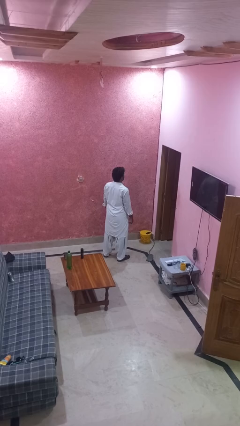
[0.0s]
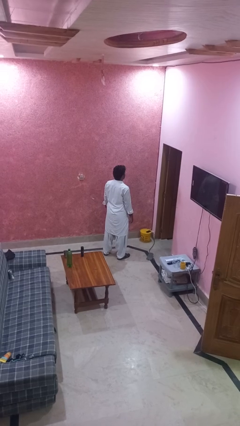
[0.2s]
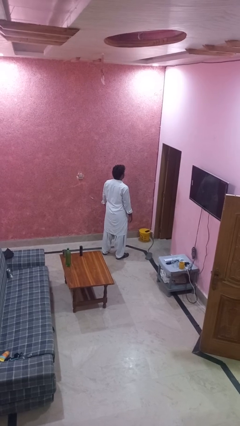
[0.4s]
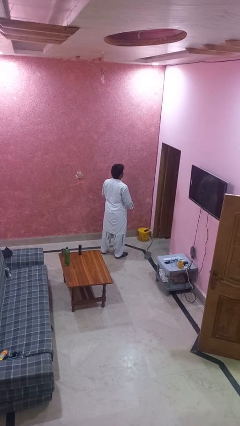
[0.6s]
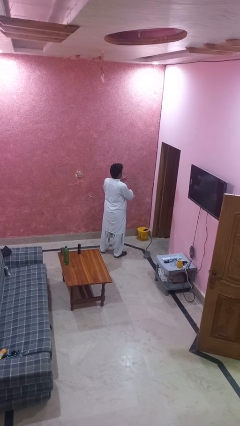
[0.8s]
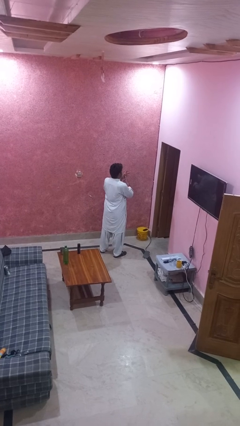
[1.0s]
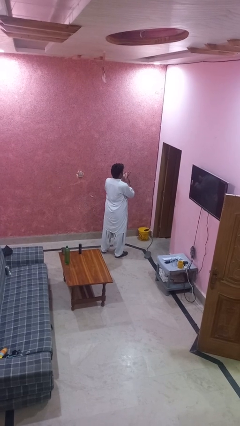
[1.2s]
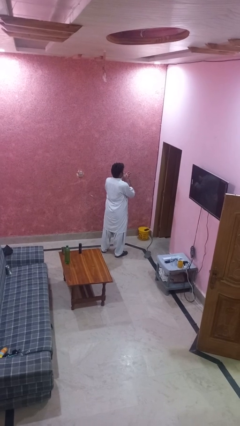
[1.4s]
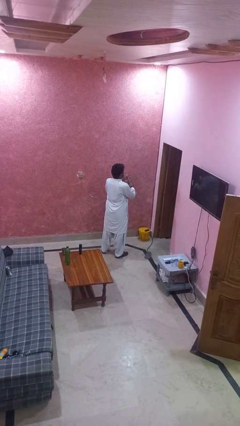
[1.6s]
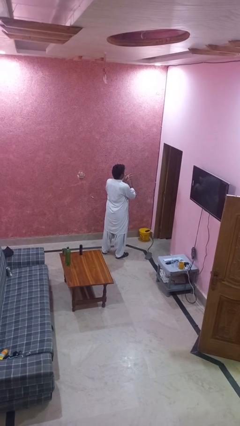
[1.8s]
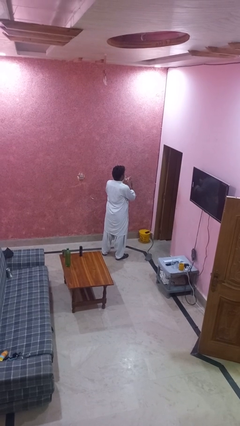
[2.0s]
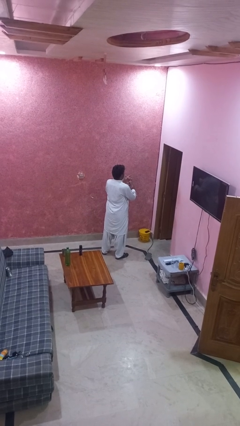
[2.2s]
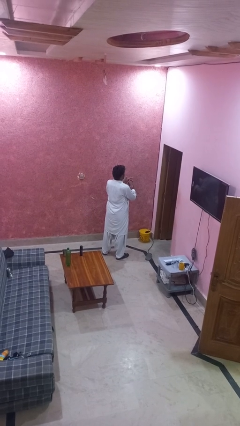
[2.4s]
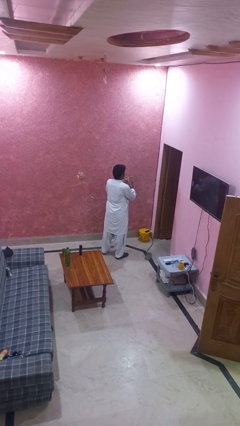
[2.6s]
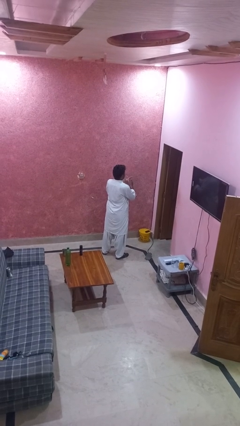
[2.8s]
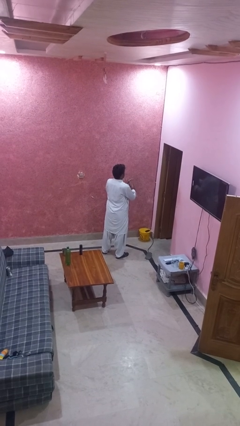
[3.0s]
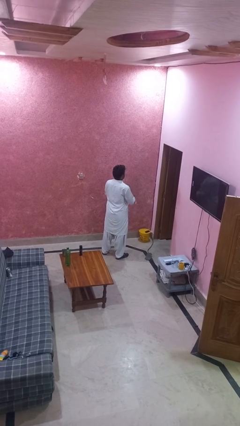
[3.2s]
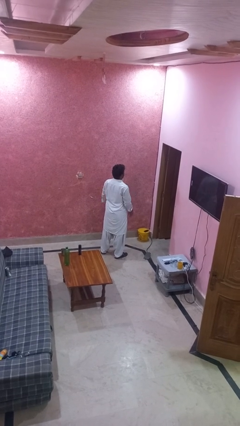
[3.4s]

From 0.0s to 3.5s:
person snaps fingers

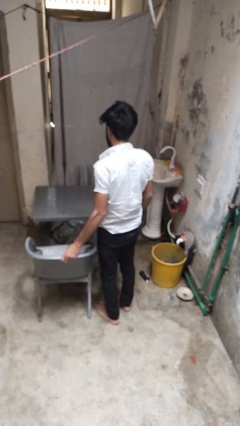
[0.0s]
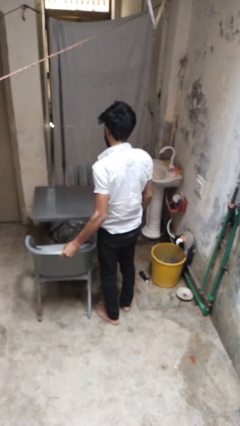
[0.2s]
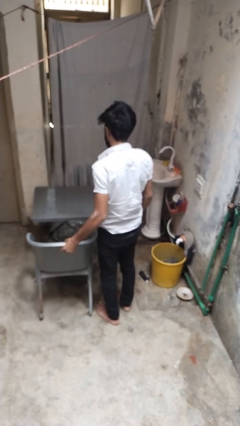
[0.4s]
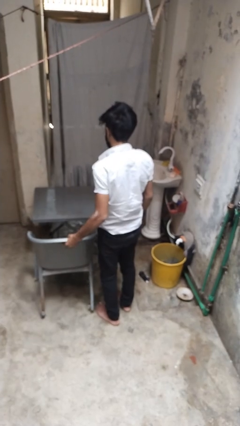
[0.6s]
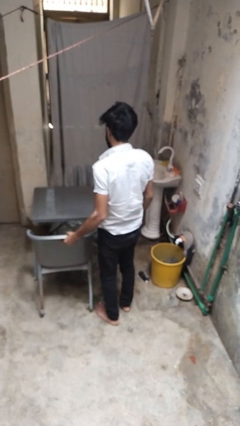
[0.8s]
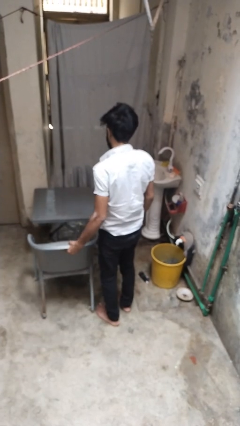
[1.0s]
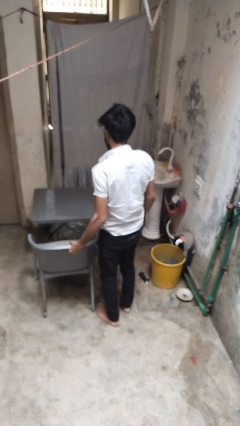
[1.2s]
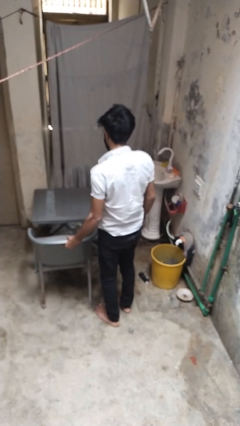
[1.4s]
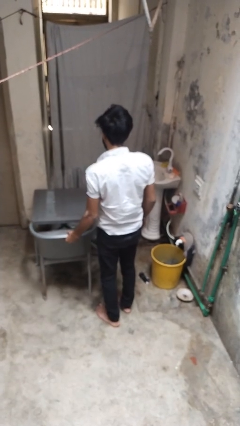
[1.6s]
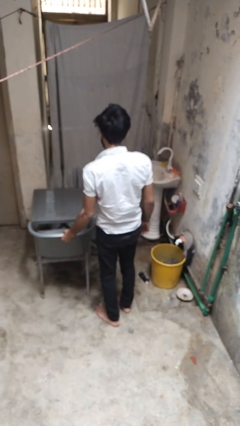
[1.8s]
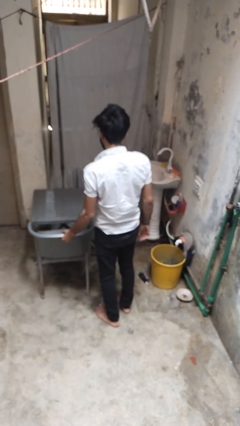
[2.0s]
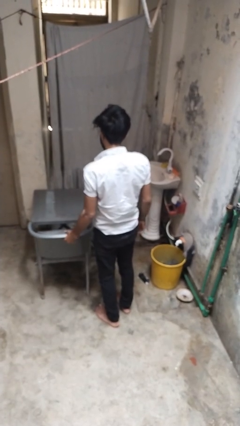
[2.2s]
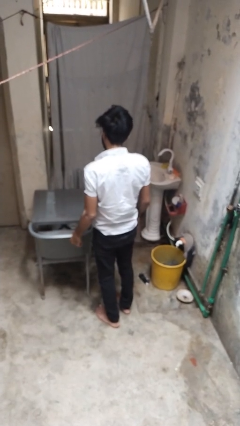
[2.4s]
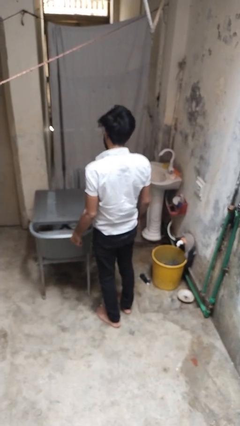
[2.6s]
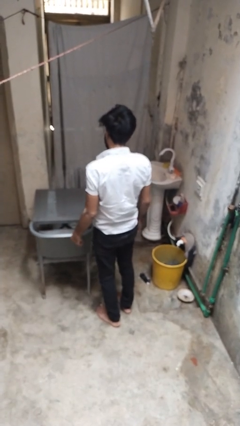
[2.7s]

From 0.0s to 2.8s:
person pushes in chair

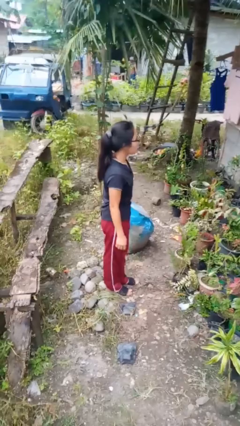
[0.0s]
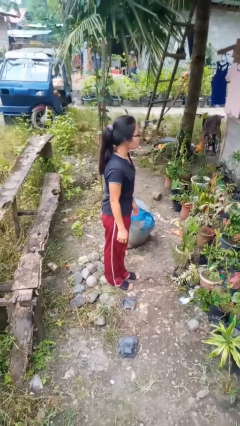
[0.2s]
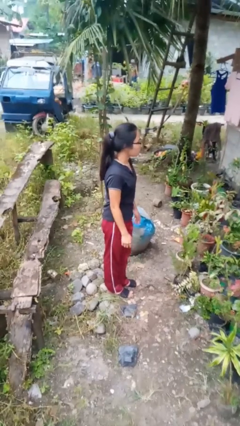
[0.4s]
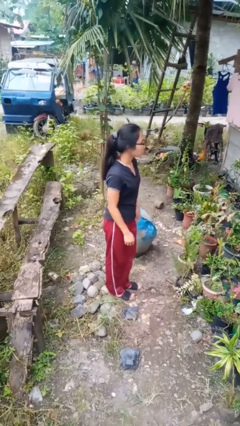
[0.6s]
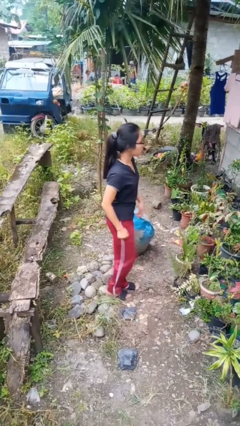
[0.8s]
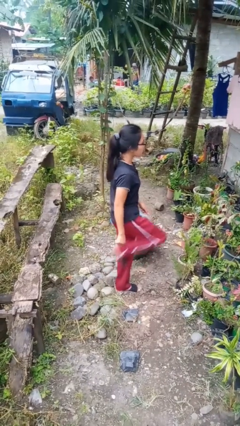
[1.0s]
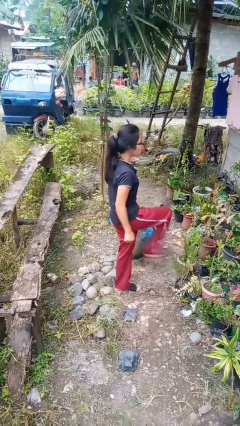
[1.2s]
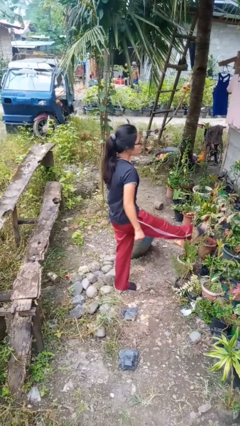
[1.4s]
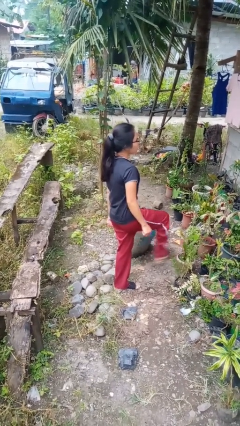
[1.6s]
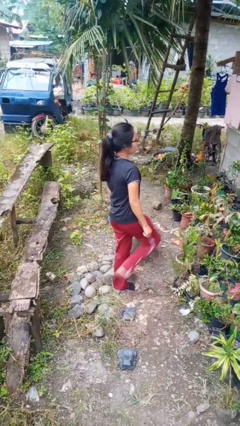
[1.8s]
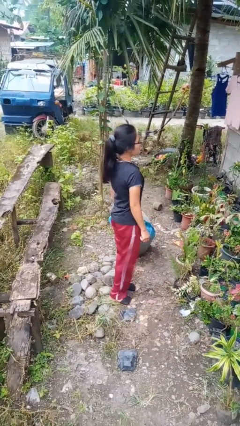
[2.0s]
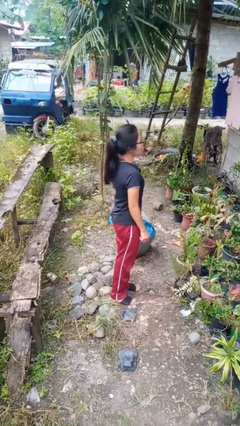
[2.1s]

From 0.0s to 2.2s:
person karate kicks

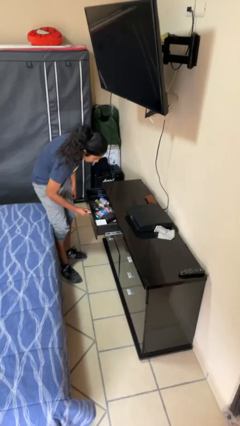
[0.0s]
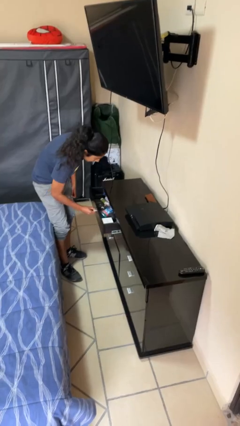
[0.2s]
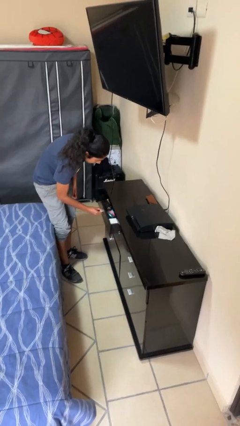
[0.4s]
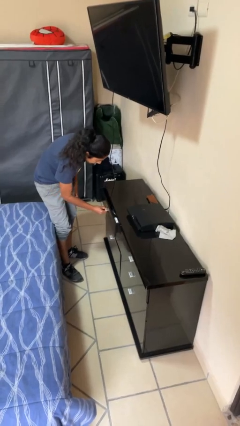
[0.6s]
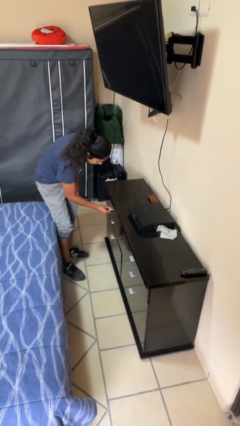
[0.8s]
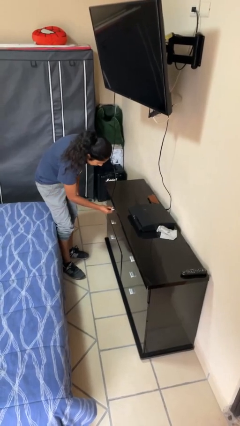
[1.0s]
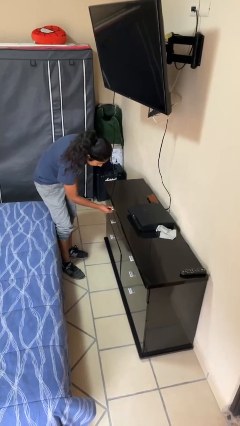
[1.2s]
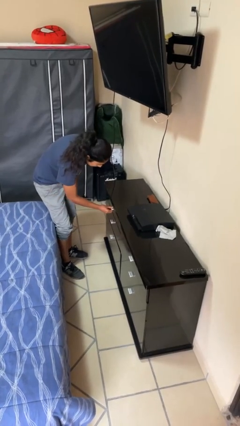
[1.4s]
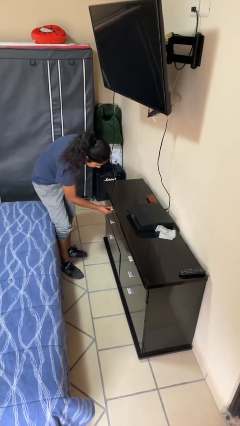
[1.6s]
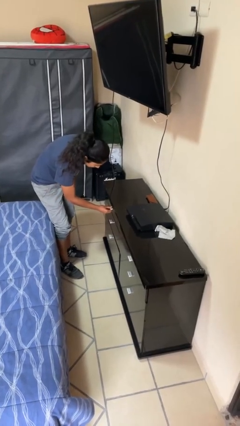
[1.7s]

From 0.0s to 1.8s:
person closes dresser drawer

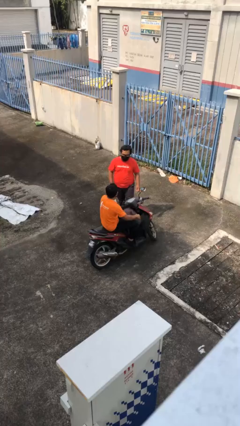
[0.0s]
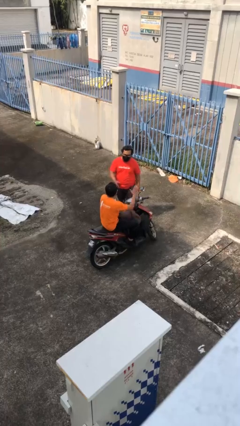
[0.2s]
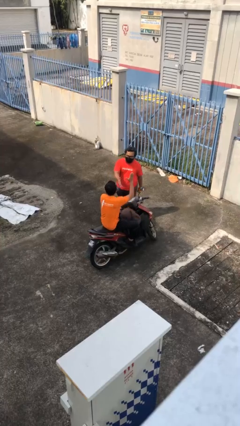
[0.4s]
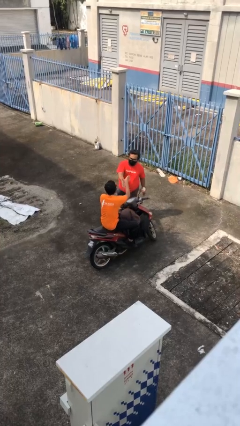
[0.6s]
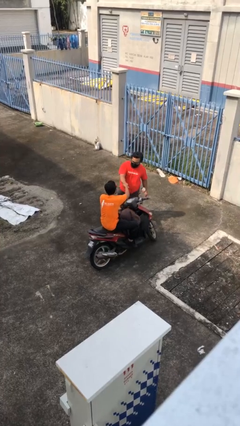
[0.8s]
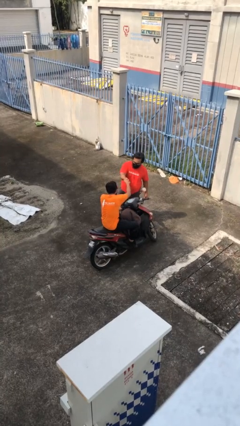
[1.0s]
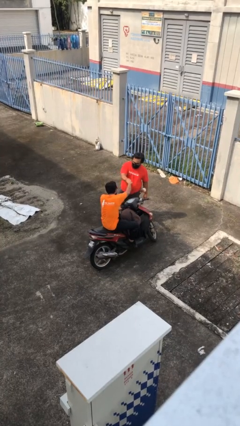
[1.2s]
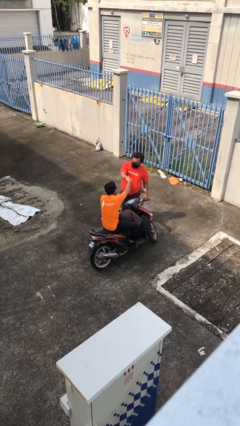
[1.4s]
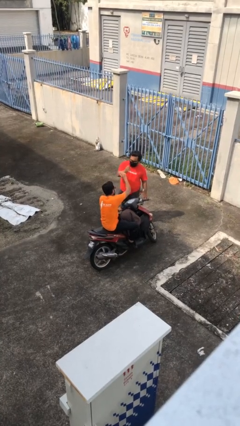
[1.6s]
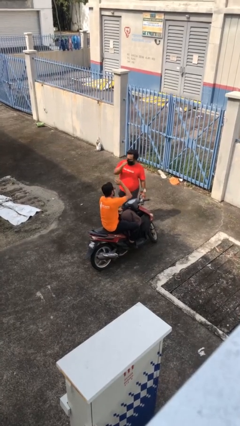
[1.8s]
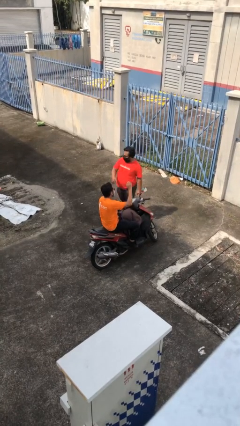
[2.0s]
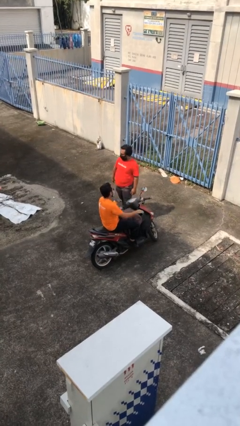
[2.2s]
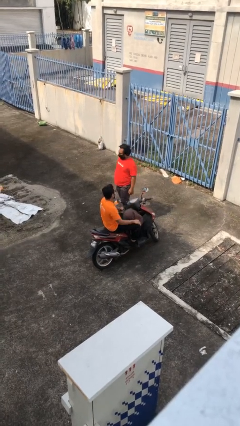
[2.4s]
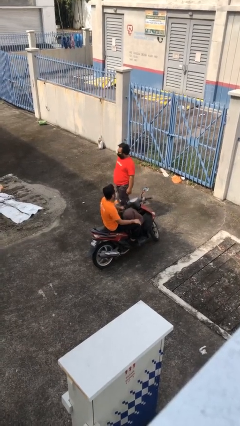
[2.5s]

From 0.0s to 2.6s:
person shakes hand

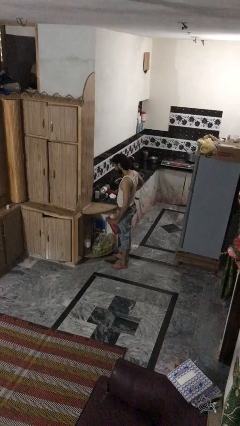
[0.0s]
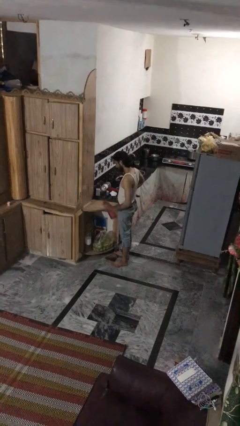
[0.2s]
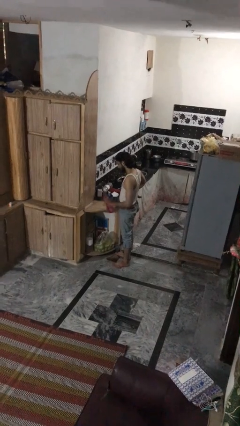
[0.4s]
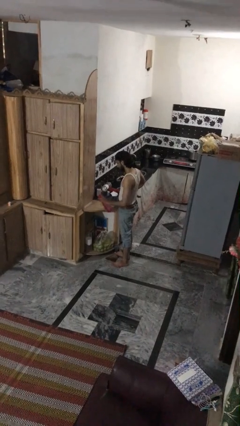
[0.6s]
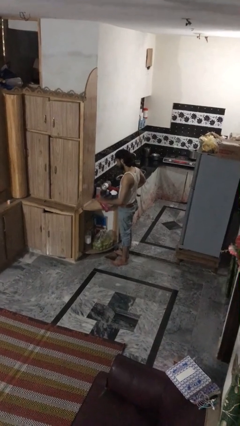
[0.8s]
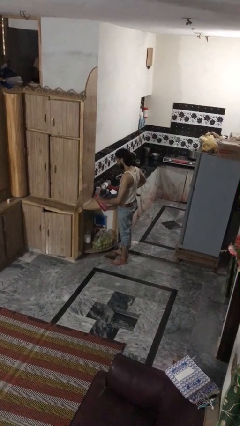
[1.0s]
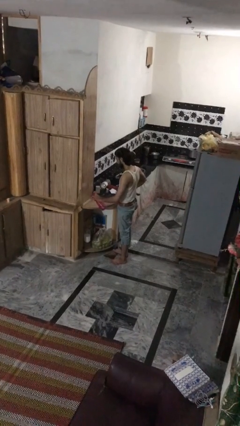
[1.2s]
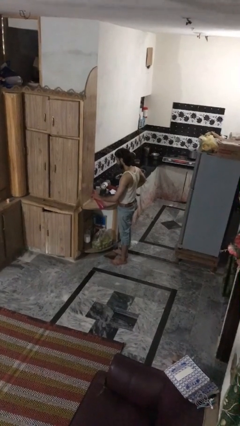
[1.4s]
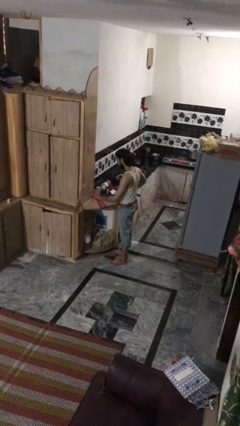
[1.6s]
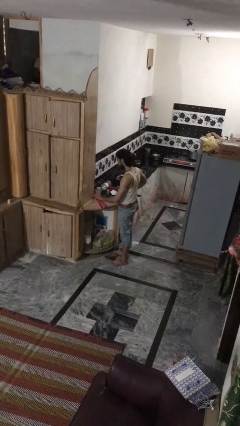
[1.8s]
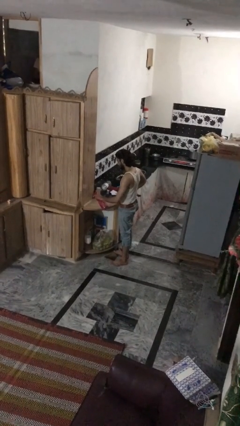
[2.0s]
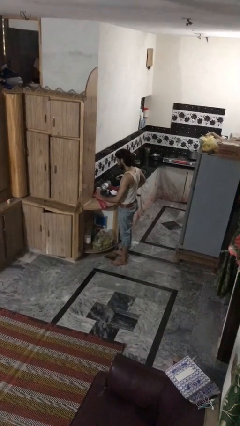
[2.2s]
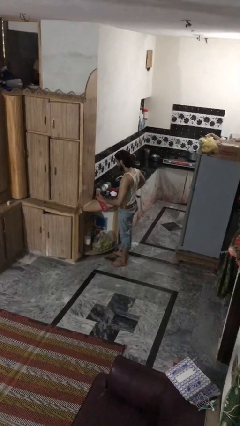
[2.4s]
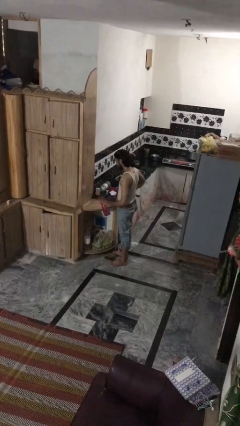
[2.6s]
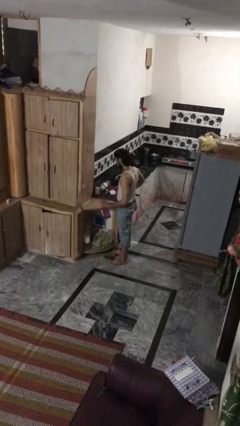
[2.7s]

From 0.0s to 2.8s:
person sprays from bottle

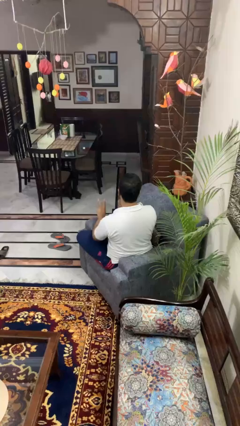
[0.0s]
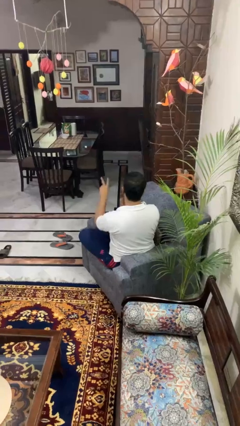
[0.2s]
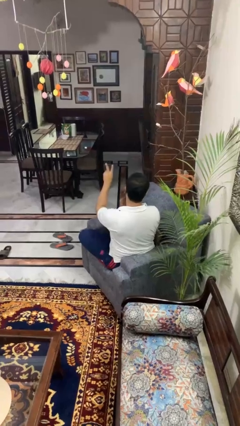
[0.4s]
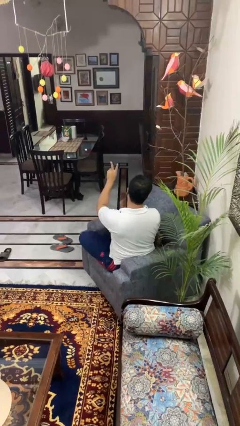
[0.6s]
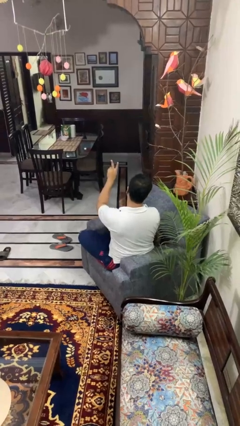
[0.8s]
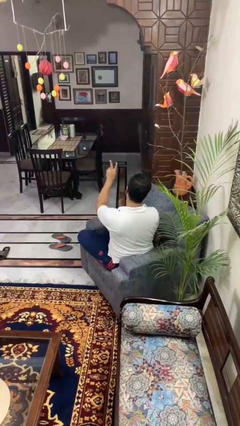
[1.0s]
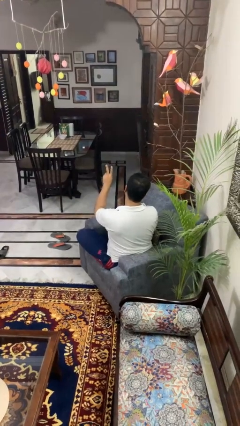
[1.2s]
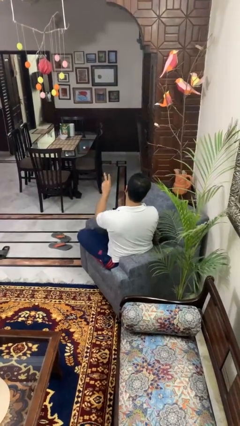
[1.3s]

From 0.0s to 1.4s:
person gestures peace
